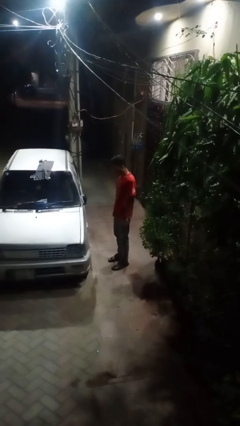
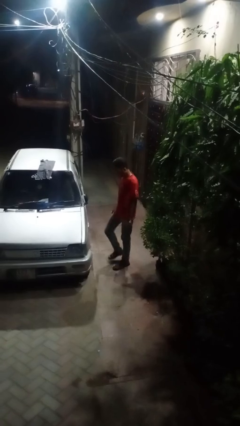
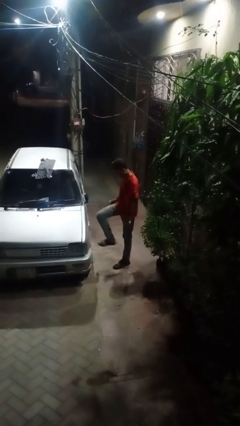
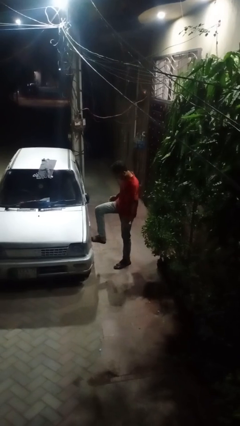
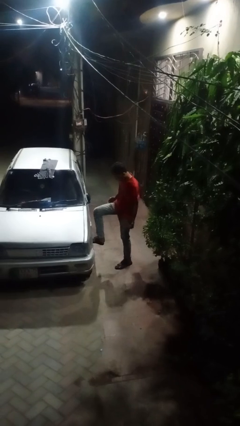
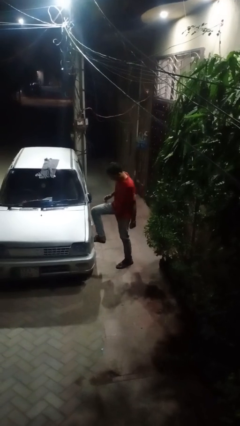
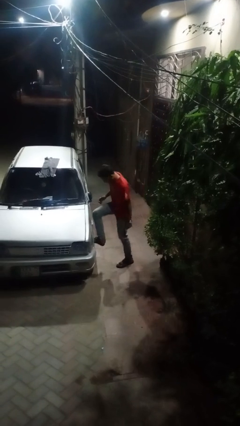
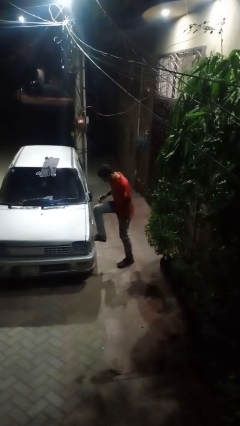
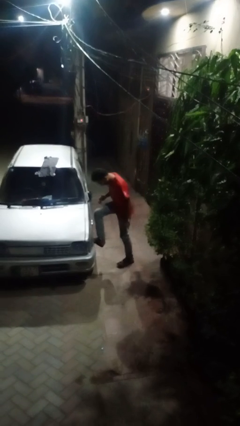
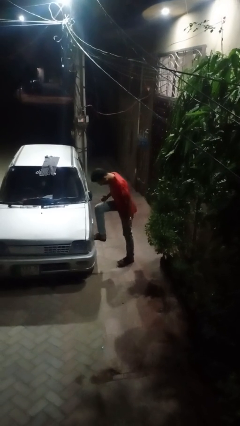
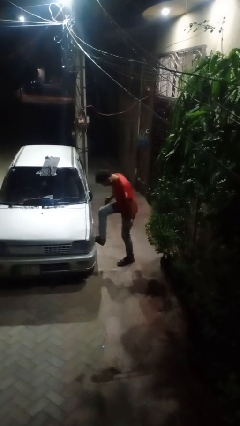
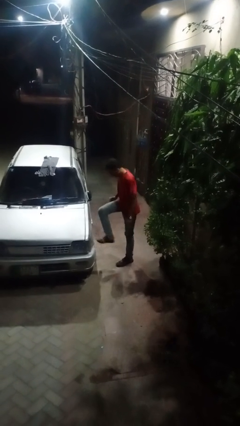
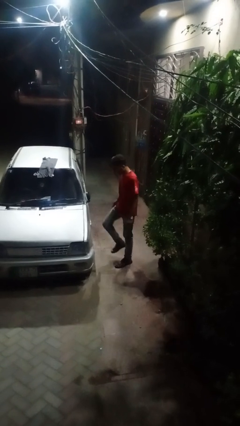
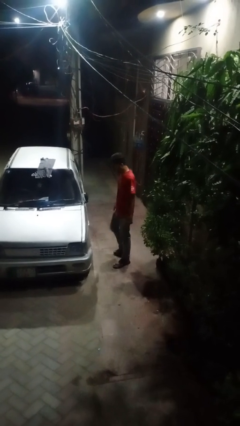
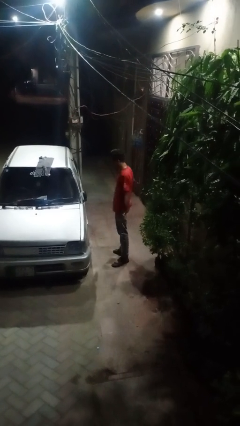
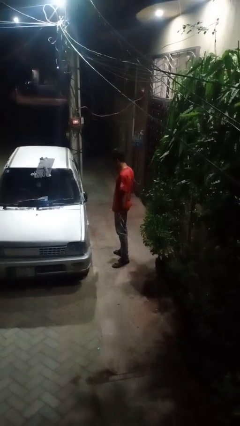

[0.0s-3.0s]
person kicks car tires

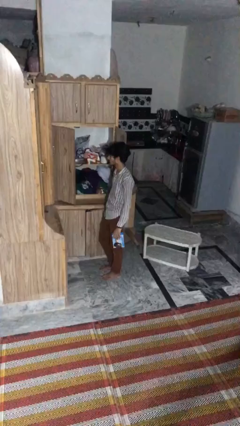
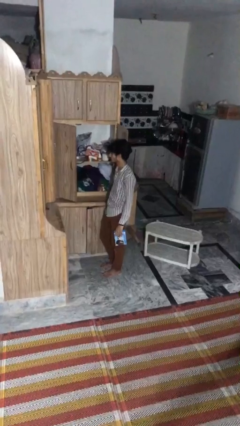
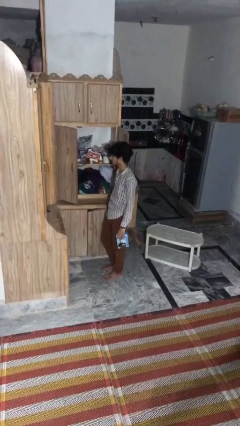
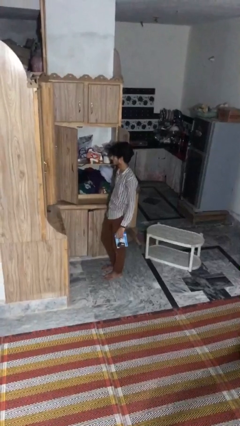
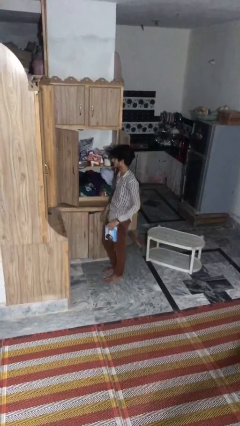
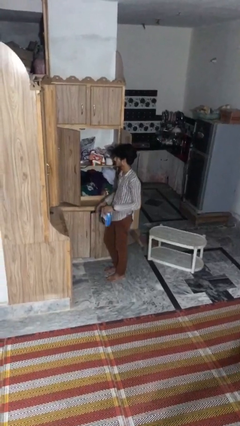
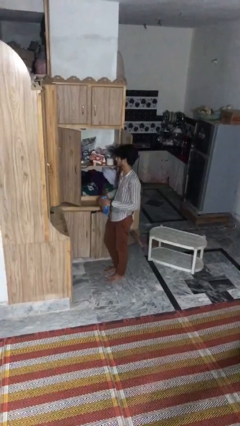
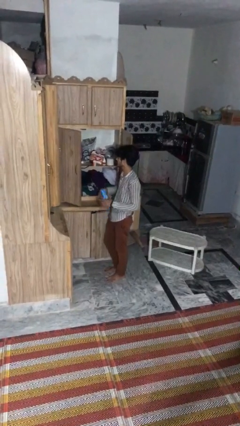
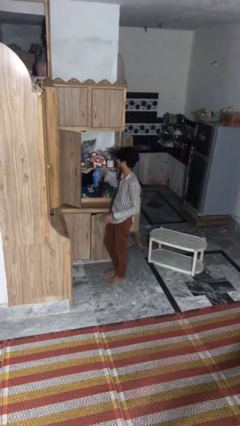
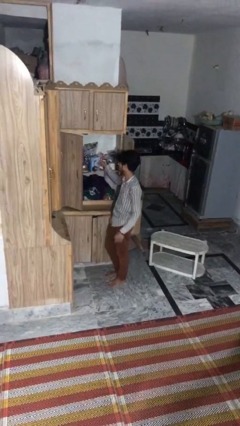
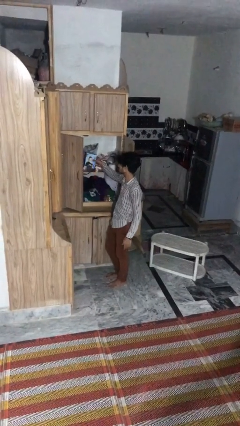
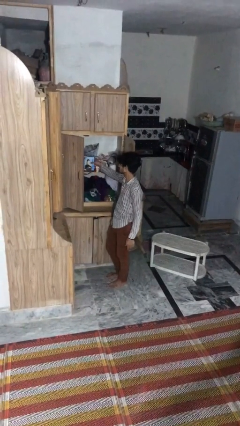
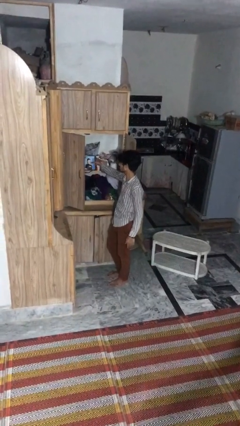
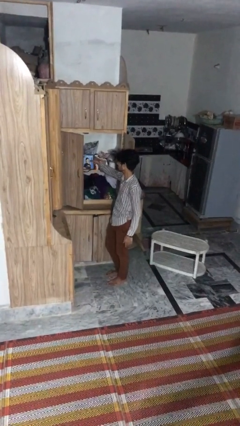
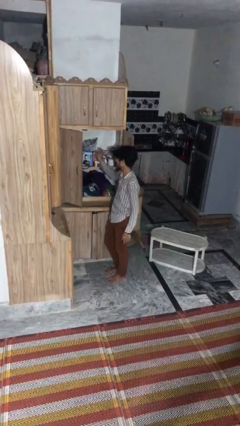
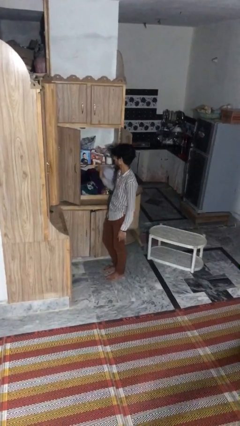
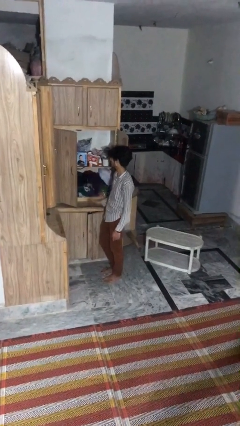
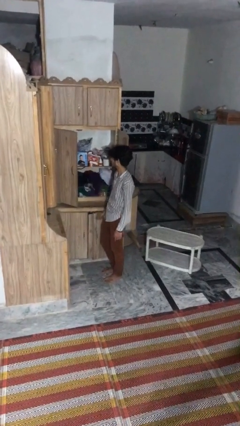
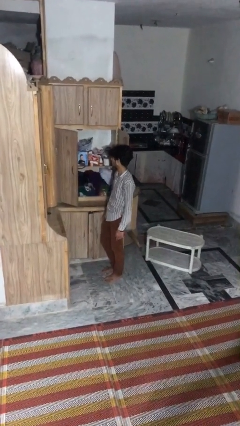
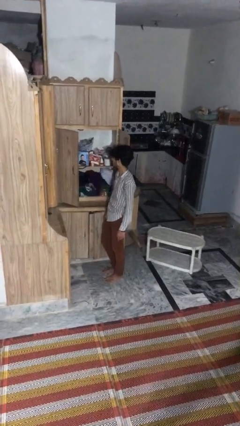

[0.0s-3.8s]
person puts down object into cabinet

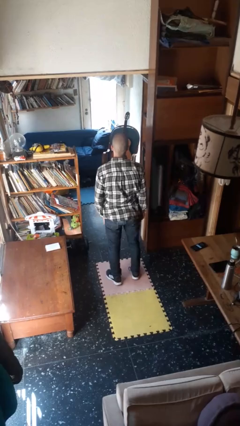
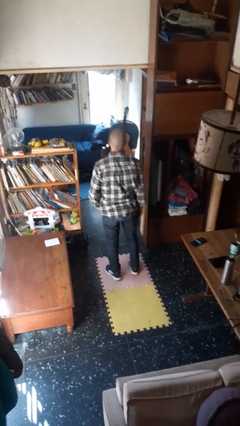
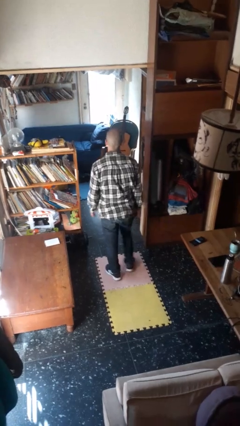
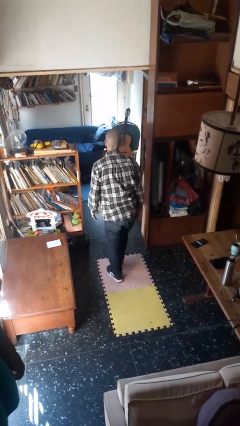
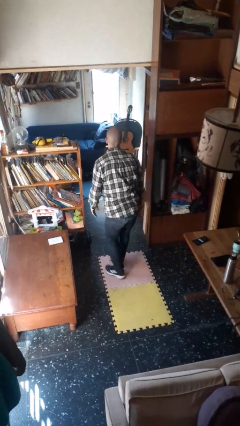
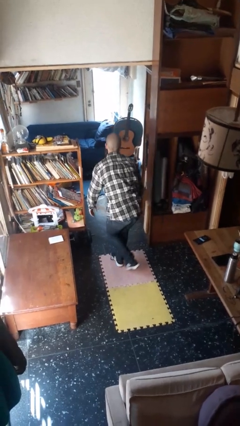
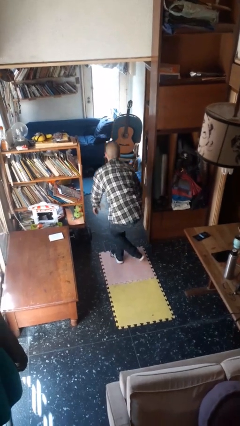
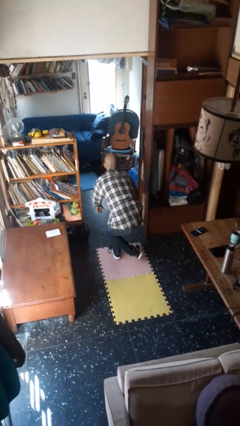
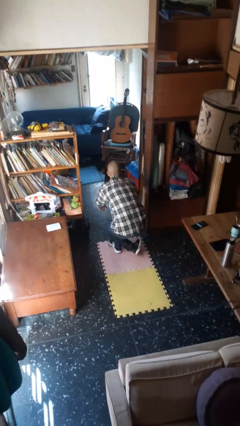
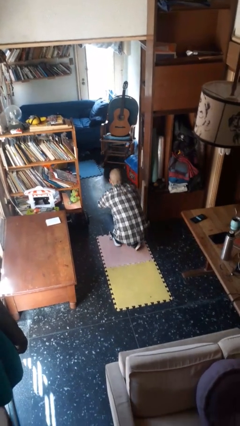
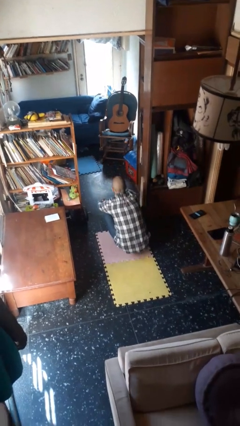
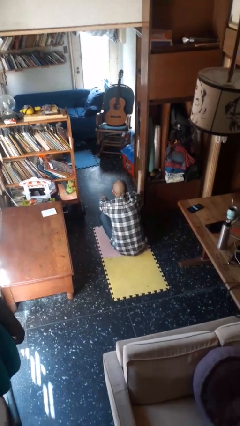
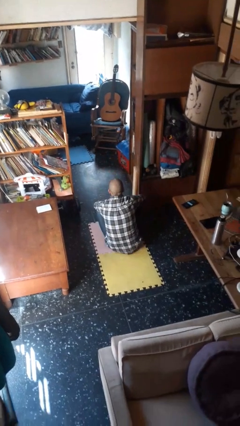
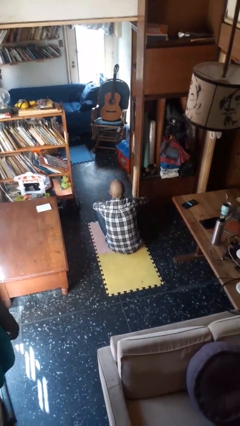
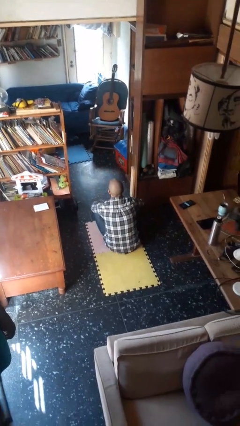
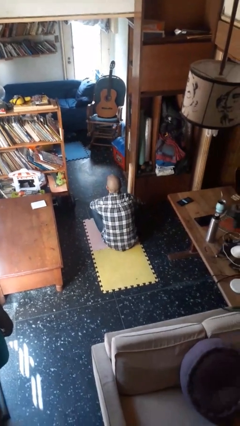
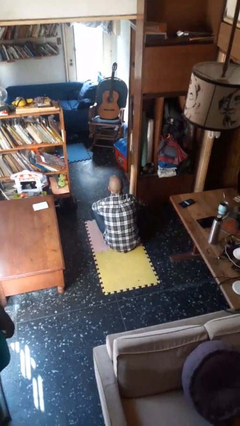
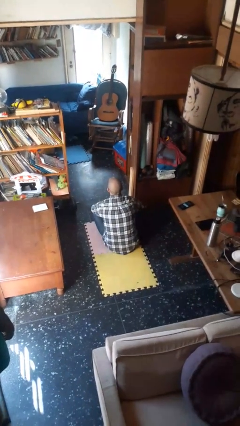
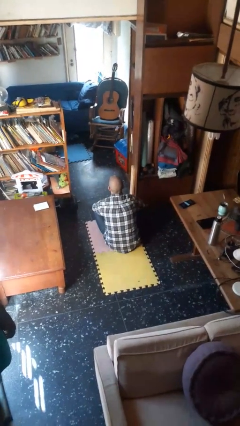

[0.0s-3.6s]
person sits crisscross

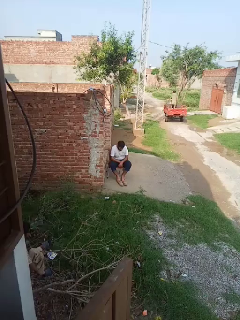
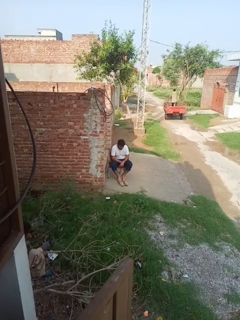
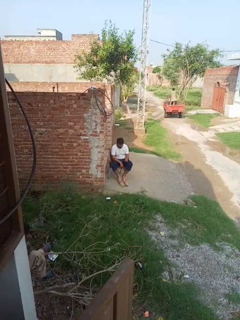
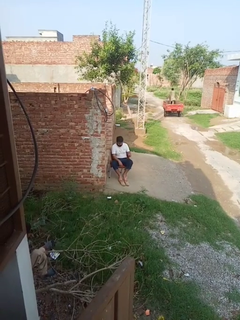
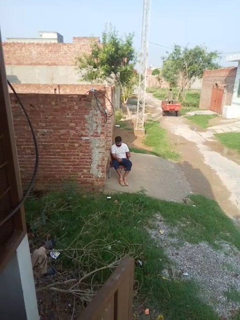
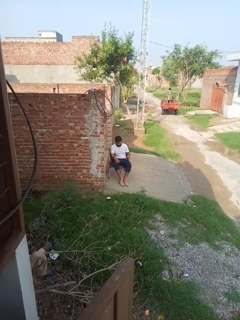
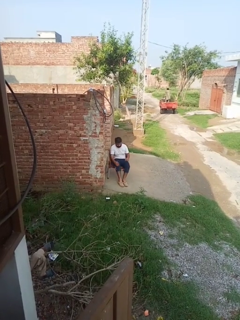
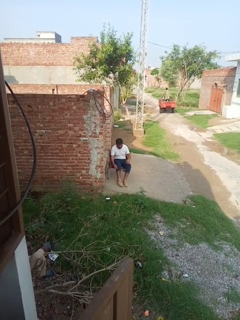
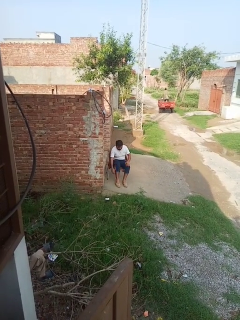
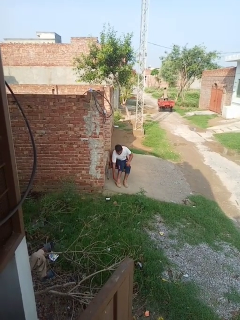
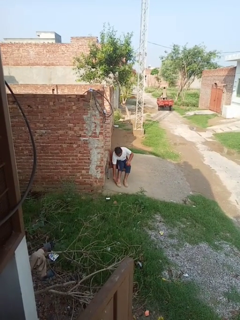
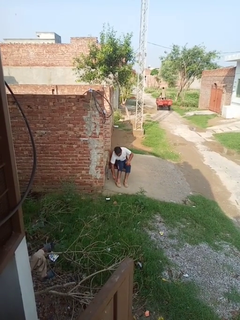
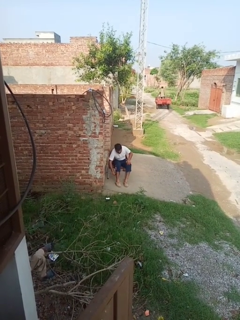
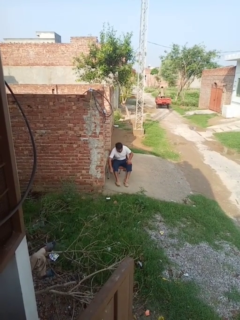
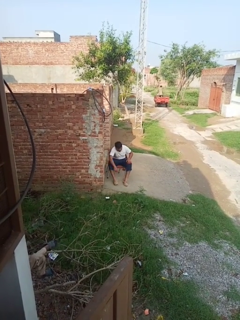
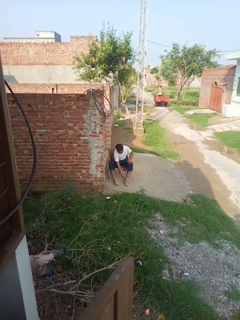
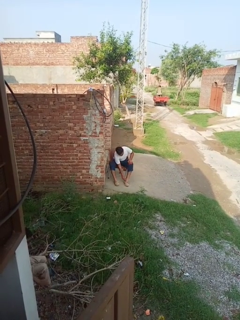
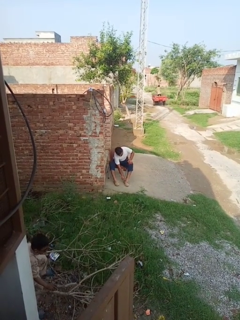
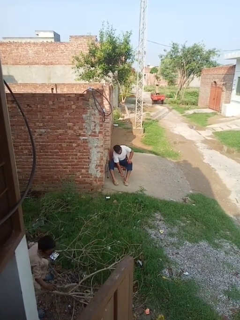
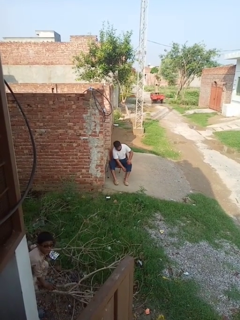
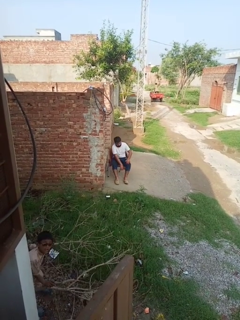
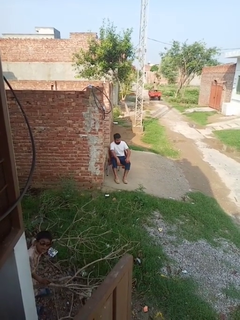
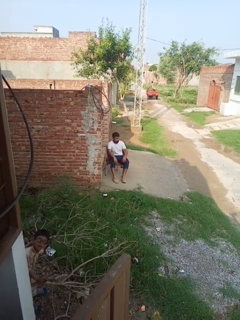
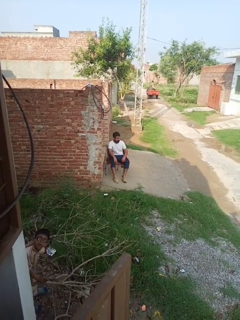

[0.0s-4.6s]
person puts on shoes

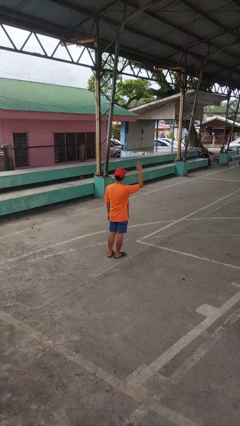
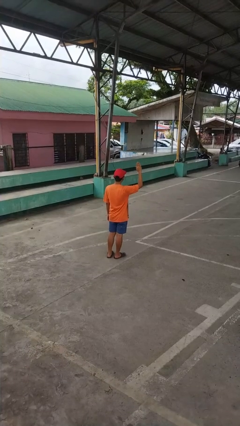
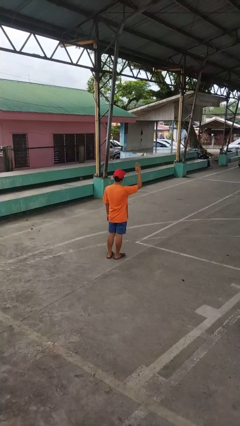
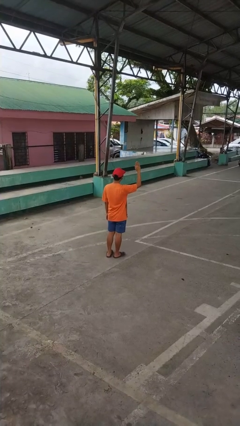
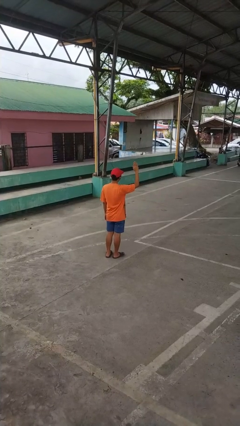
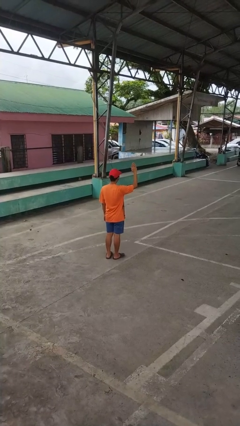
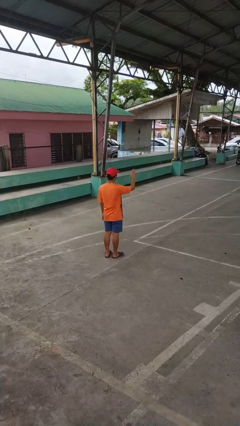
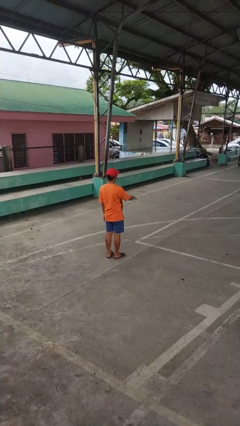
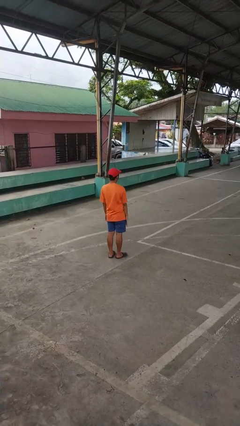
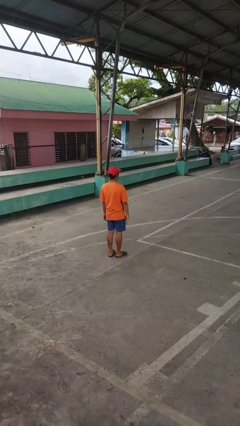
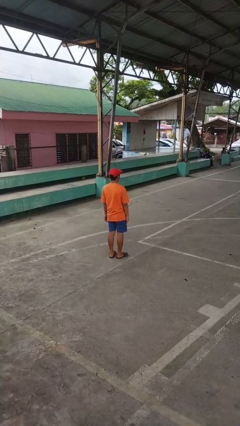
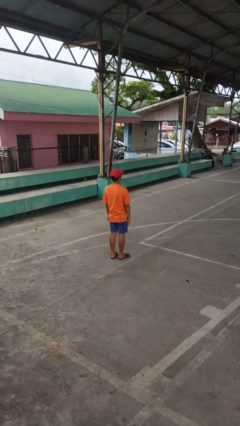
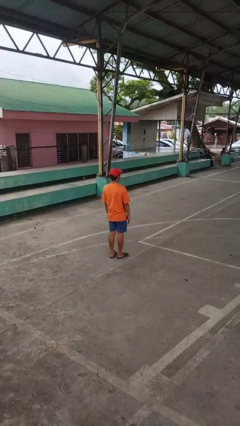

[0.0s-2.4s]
person gestures lower hand

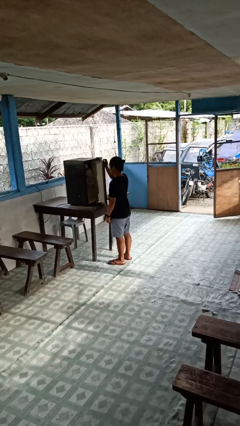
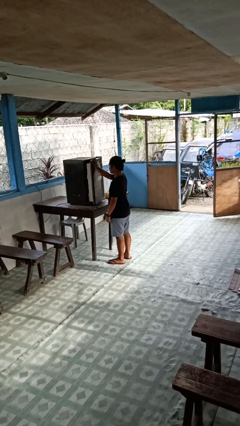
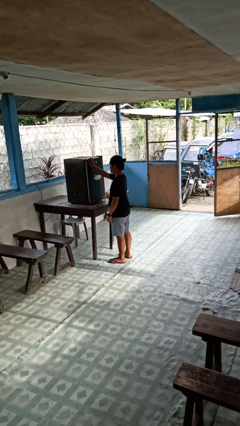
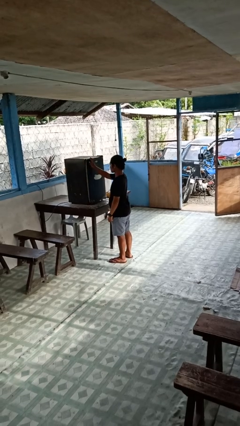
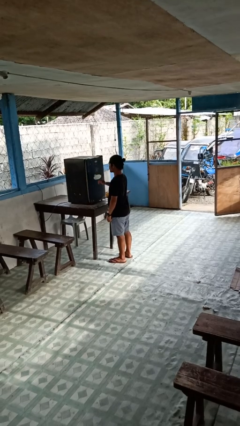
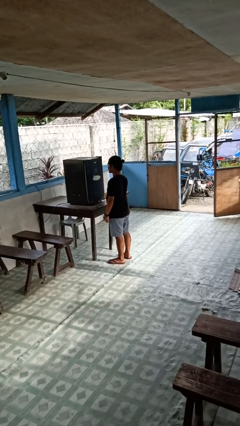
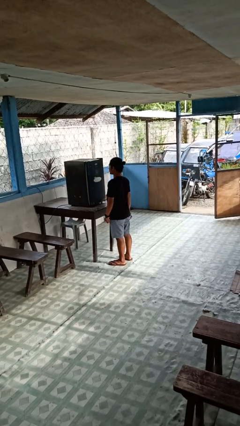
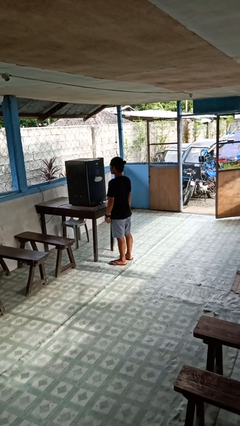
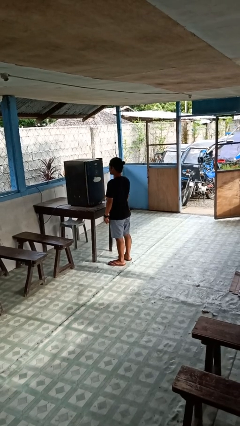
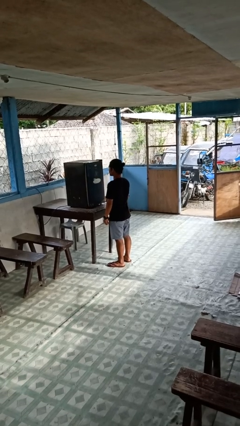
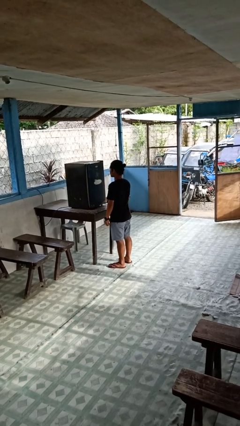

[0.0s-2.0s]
person closes refrigerator
